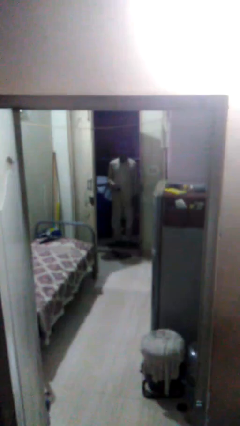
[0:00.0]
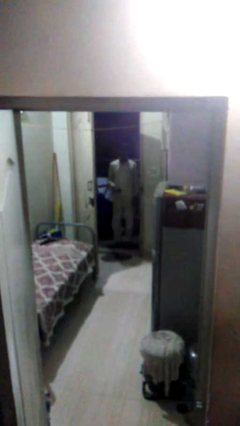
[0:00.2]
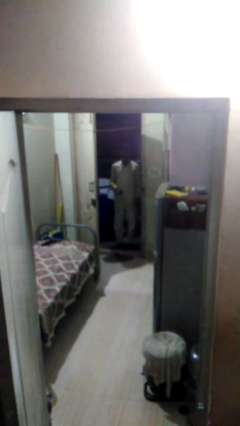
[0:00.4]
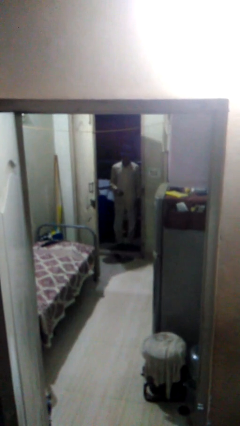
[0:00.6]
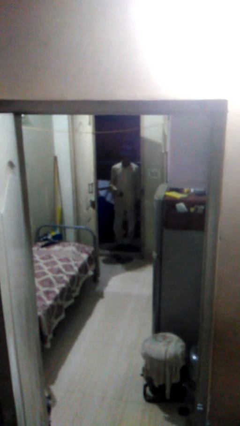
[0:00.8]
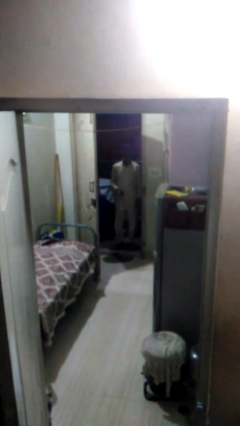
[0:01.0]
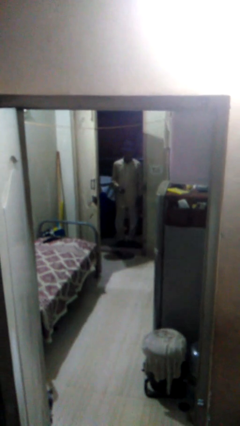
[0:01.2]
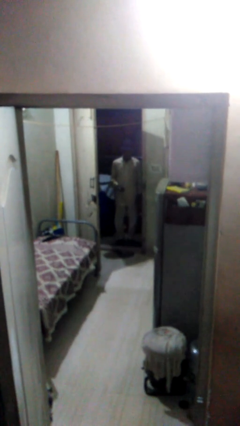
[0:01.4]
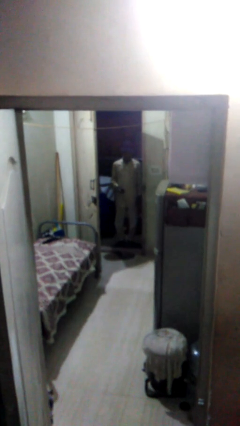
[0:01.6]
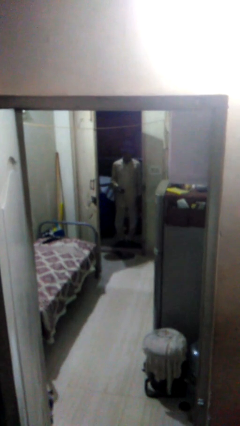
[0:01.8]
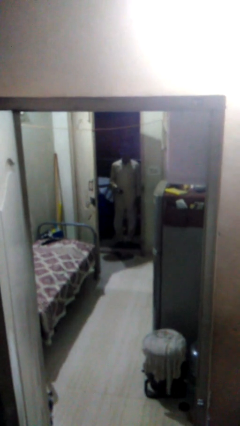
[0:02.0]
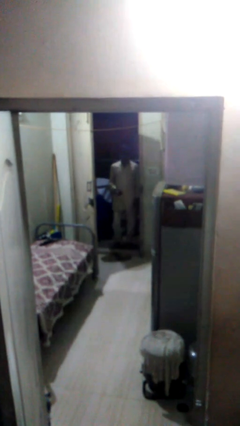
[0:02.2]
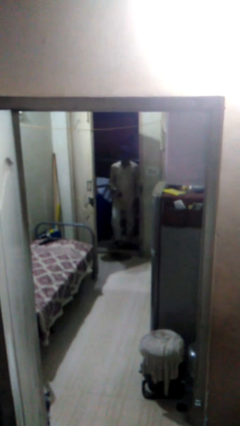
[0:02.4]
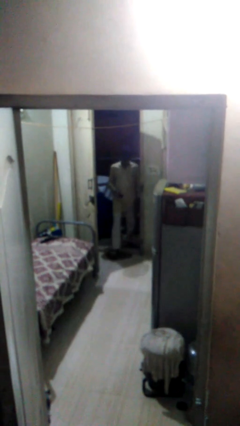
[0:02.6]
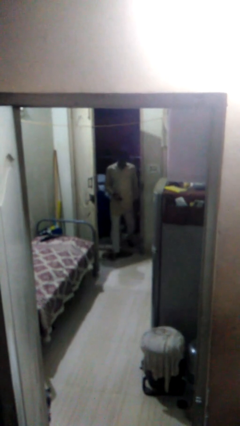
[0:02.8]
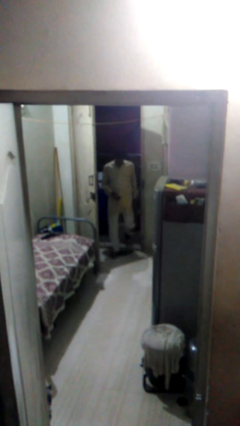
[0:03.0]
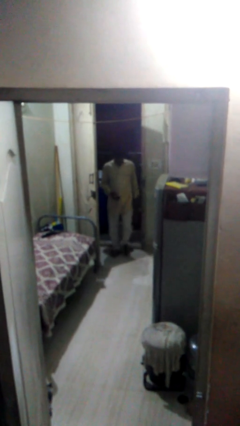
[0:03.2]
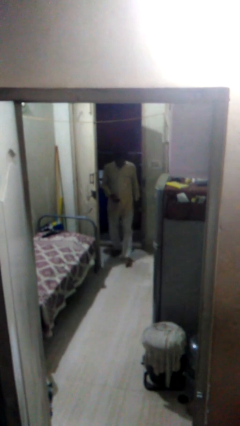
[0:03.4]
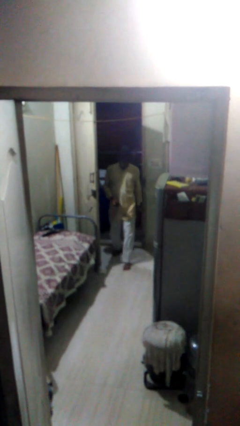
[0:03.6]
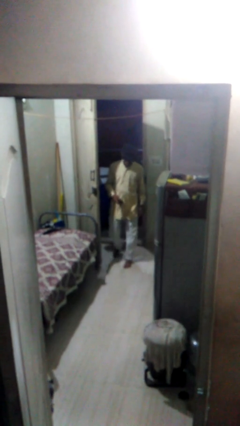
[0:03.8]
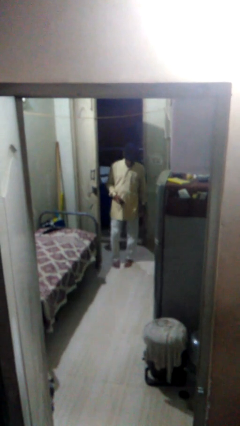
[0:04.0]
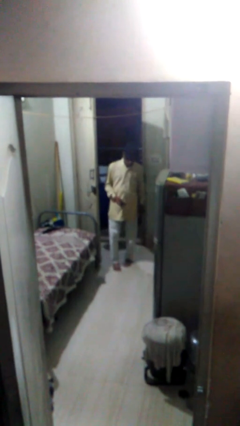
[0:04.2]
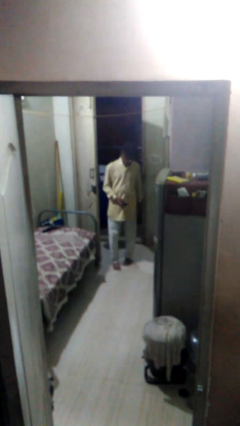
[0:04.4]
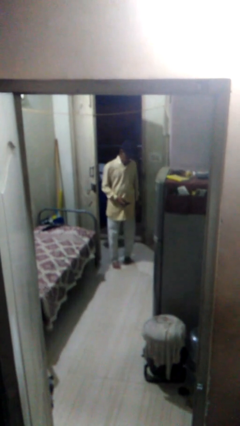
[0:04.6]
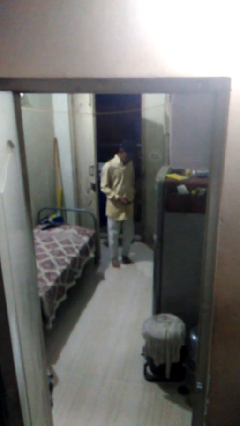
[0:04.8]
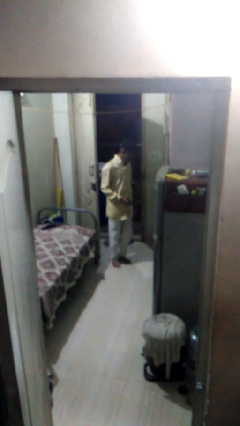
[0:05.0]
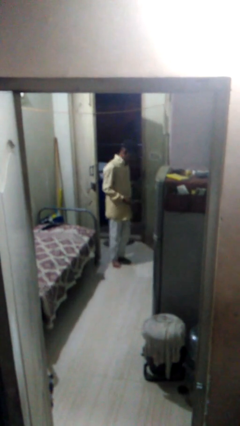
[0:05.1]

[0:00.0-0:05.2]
person enters scene through structure

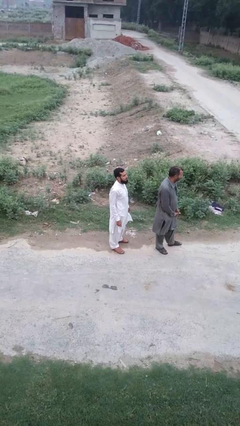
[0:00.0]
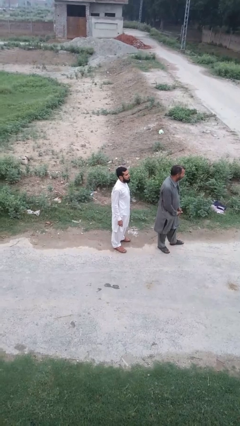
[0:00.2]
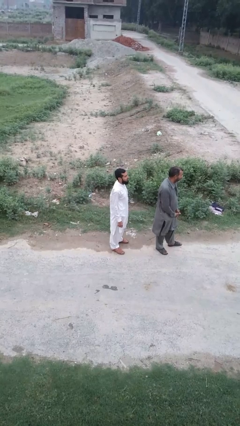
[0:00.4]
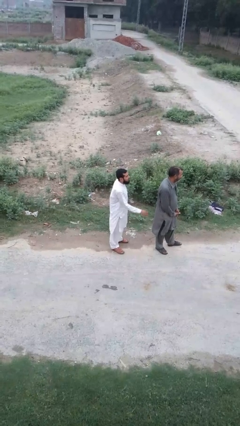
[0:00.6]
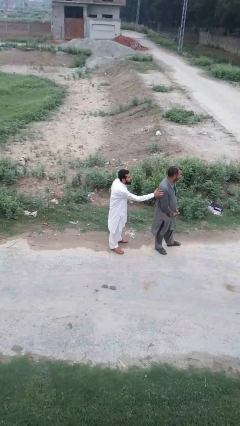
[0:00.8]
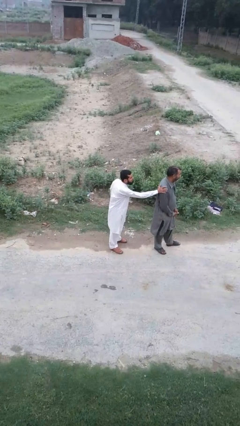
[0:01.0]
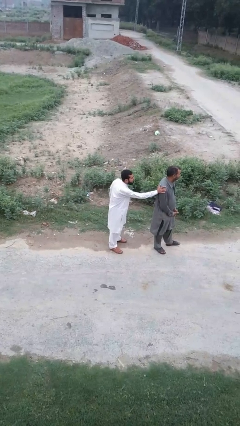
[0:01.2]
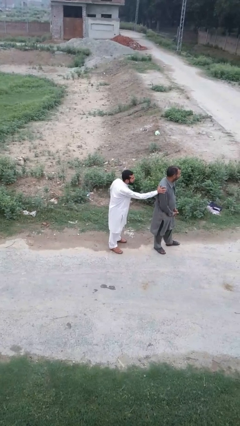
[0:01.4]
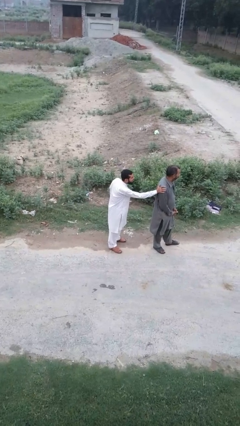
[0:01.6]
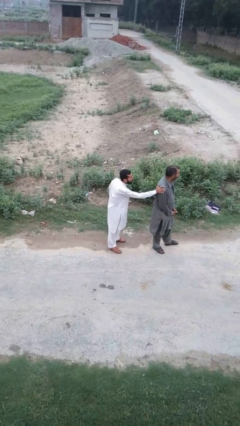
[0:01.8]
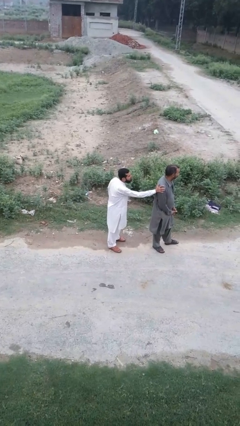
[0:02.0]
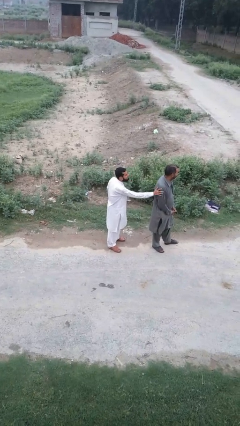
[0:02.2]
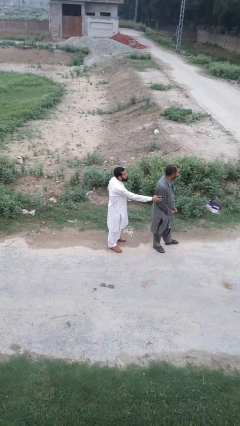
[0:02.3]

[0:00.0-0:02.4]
person touches back of person

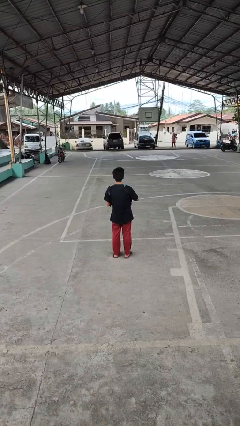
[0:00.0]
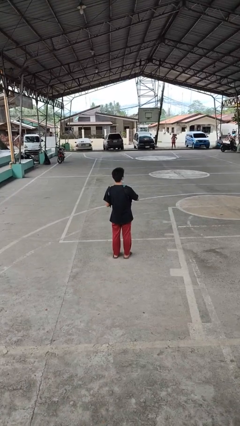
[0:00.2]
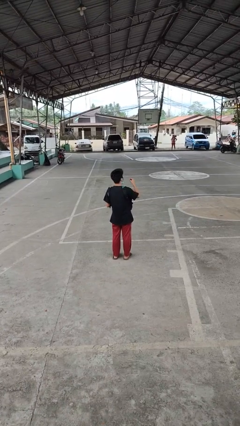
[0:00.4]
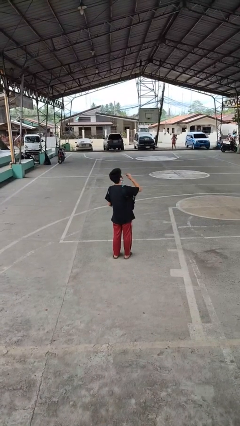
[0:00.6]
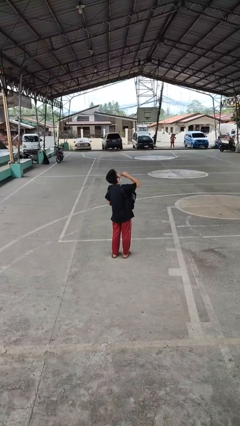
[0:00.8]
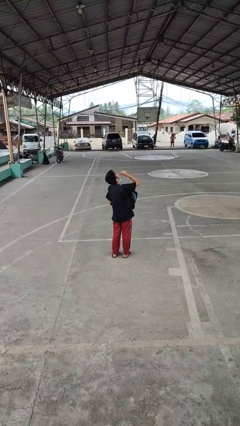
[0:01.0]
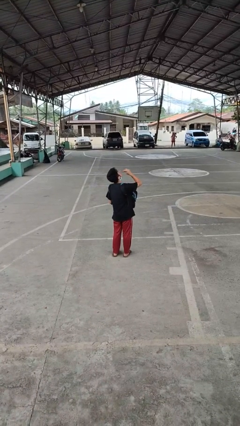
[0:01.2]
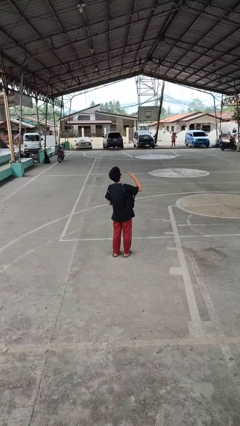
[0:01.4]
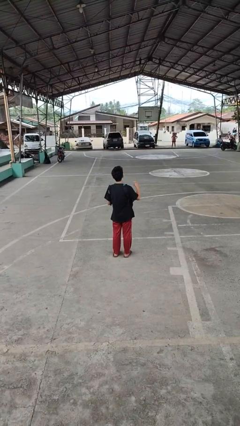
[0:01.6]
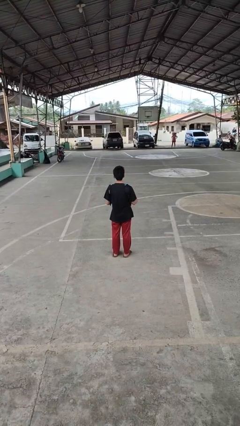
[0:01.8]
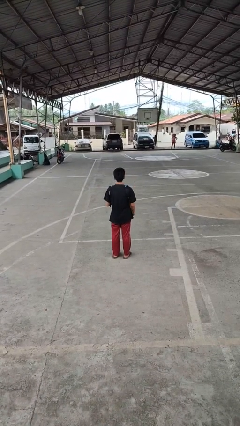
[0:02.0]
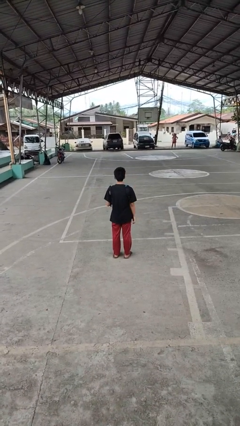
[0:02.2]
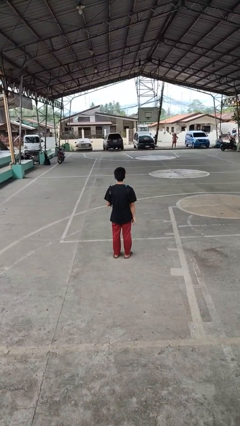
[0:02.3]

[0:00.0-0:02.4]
person eats snack from bag

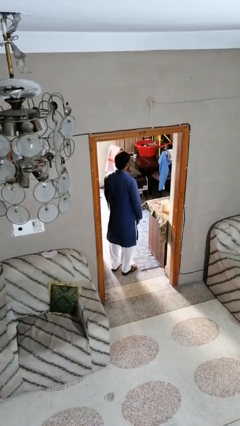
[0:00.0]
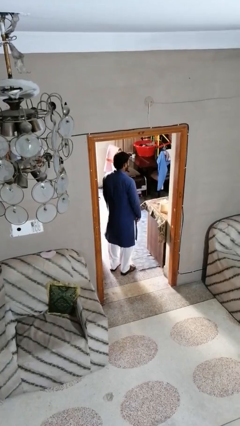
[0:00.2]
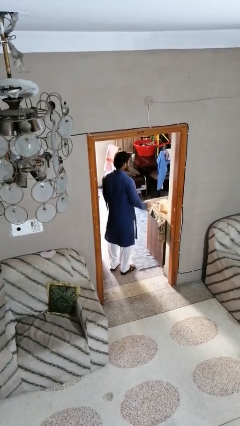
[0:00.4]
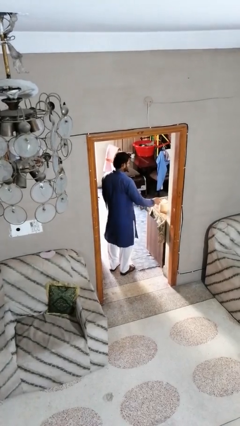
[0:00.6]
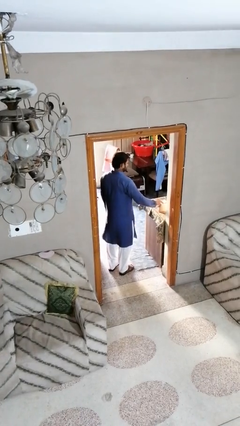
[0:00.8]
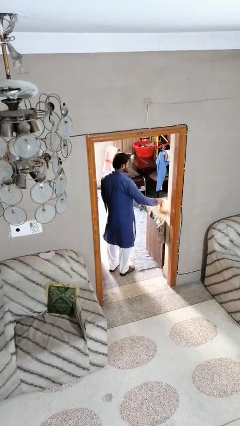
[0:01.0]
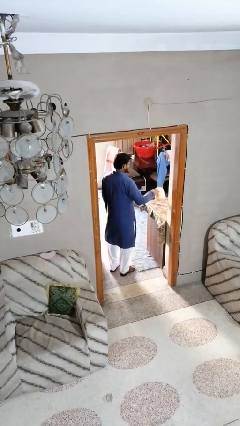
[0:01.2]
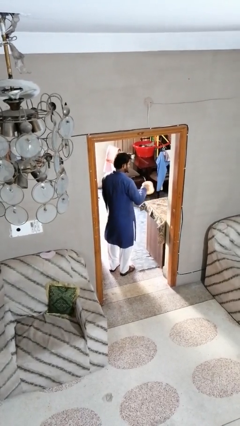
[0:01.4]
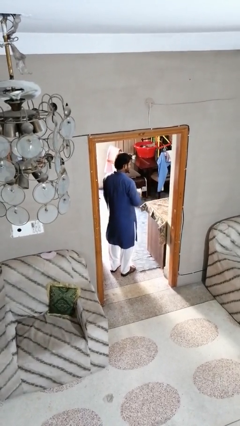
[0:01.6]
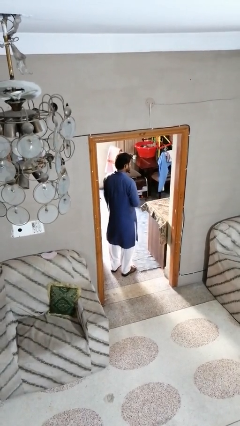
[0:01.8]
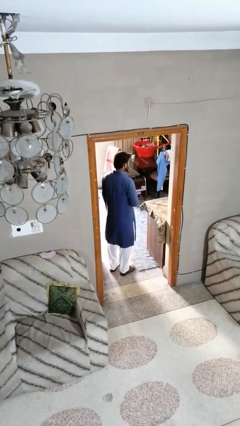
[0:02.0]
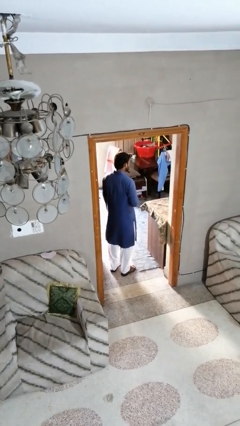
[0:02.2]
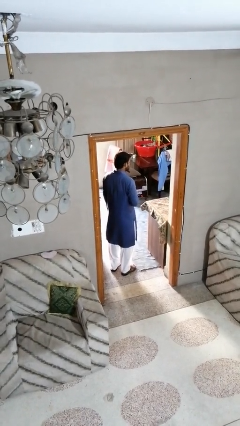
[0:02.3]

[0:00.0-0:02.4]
person picks up object from countertop

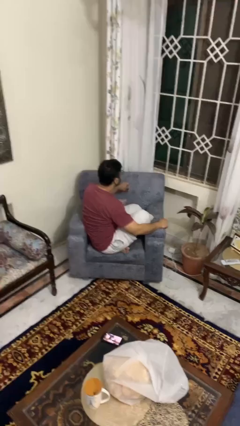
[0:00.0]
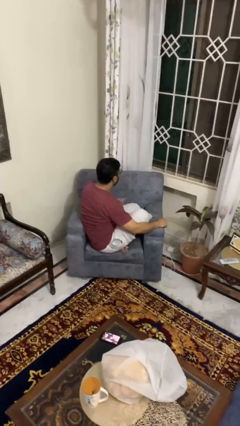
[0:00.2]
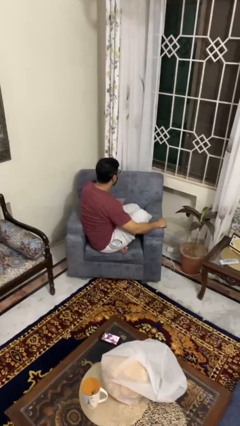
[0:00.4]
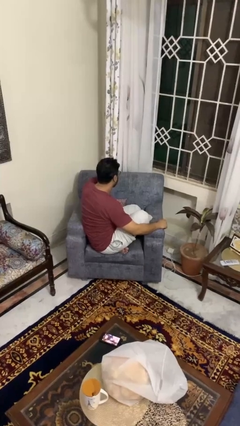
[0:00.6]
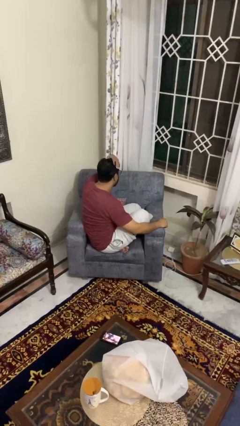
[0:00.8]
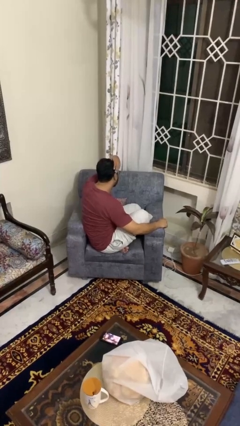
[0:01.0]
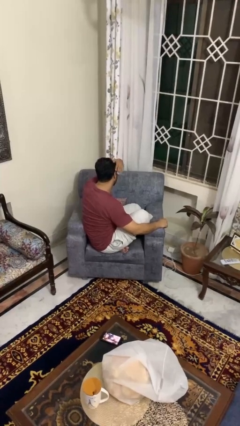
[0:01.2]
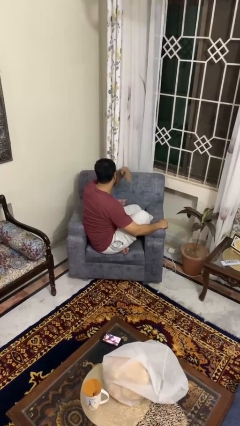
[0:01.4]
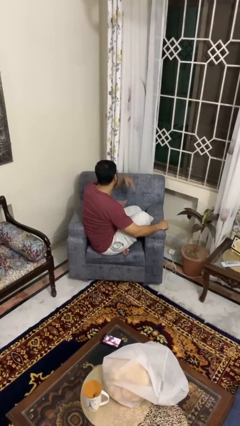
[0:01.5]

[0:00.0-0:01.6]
person strokes hair

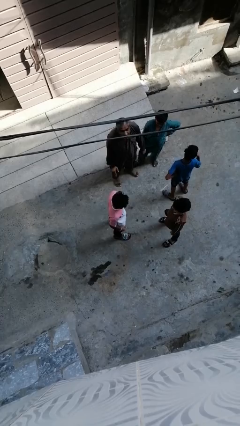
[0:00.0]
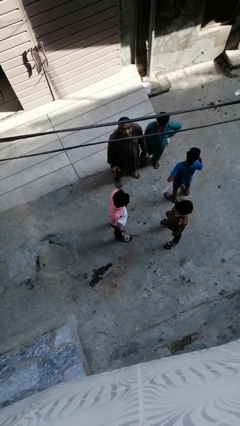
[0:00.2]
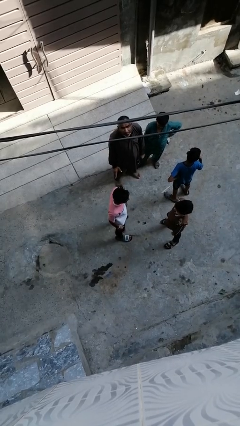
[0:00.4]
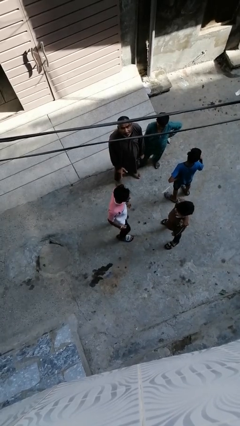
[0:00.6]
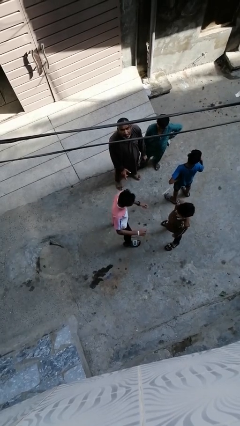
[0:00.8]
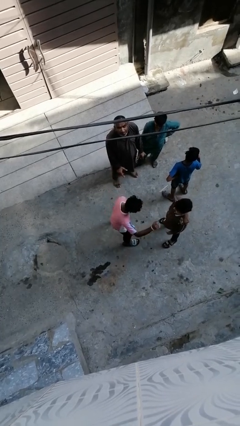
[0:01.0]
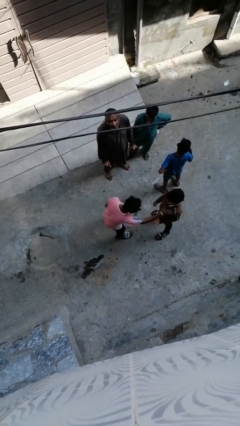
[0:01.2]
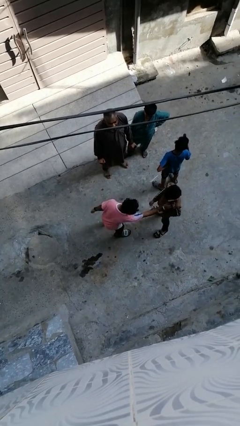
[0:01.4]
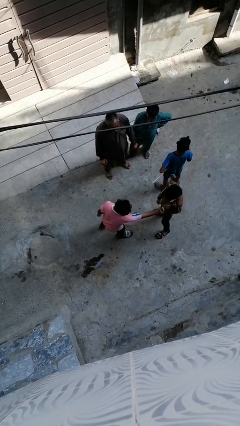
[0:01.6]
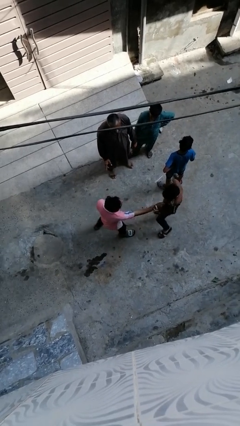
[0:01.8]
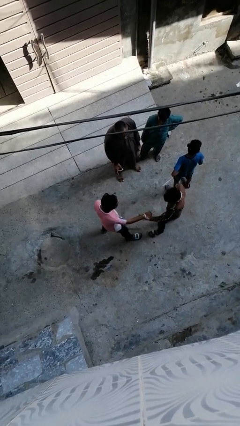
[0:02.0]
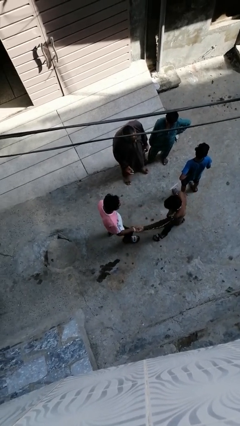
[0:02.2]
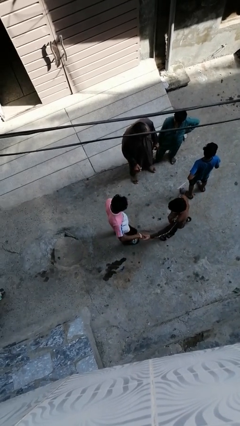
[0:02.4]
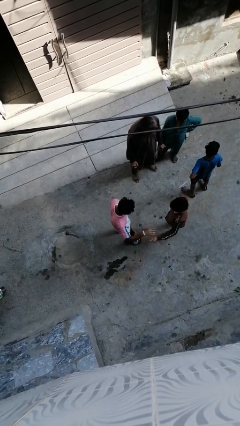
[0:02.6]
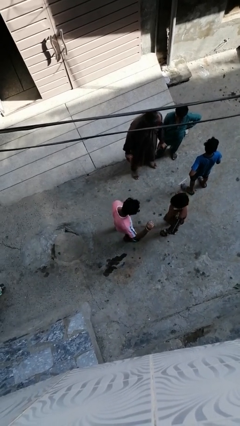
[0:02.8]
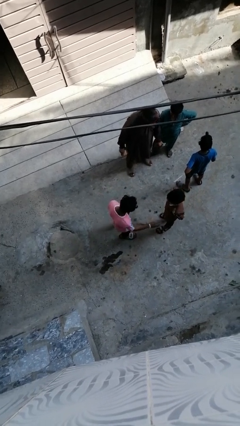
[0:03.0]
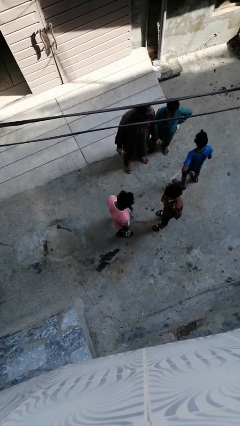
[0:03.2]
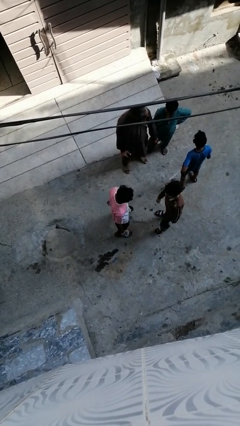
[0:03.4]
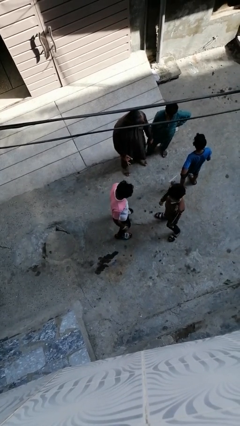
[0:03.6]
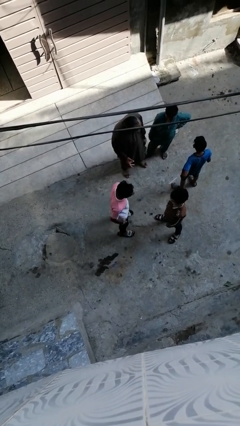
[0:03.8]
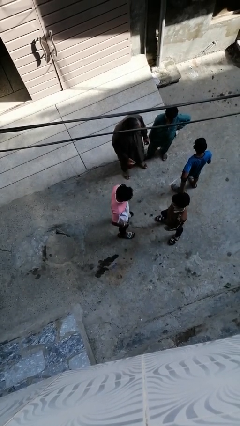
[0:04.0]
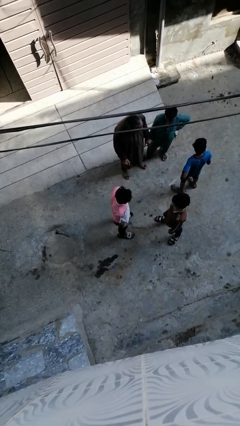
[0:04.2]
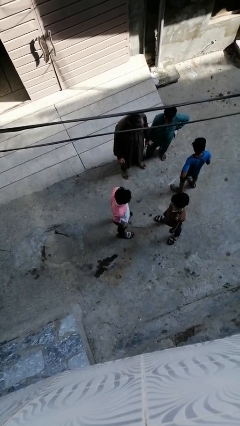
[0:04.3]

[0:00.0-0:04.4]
person laughs with person
